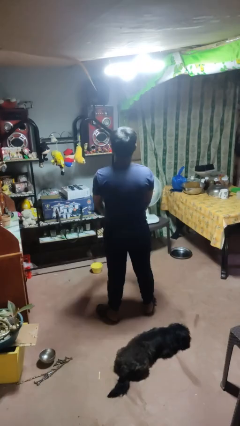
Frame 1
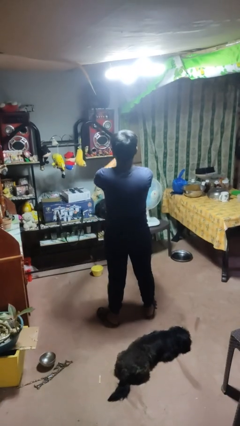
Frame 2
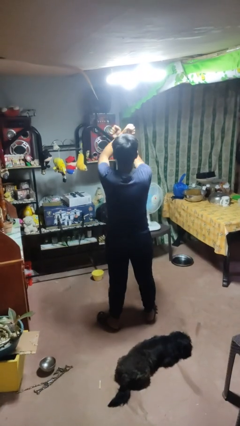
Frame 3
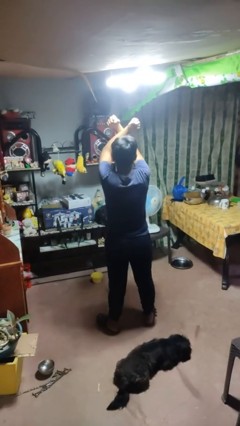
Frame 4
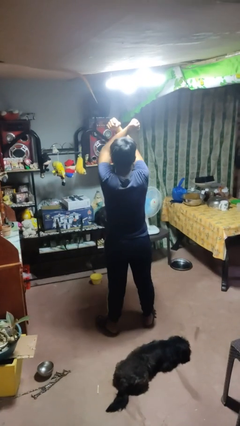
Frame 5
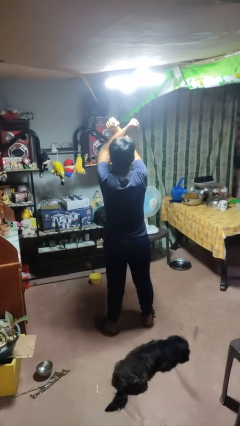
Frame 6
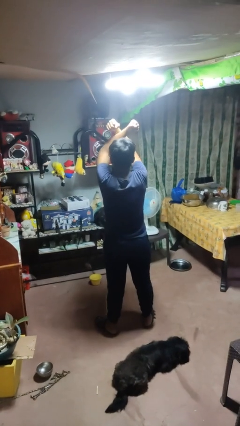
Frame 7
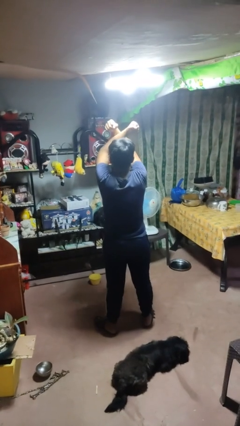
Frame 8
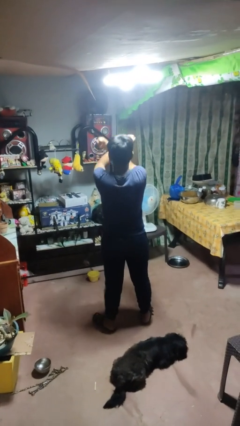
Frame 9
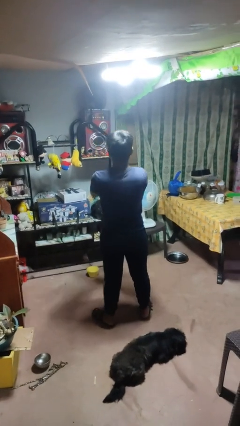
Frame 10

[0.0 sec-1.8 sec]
person gestures arms x

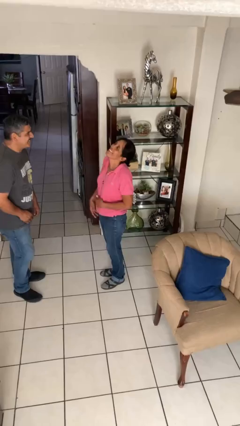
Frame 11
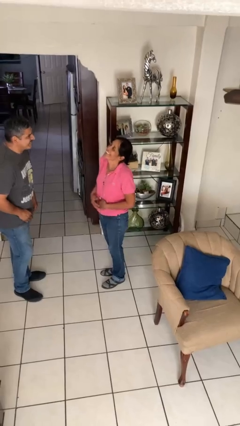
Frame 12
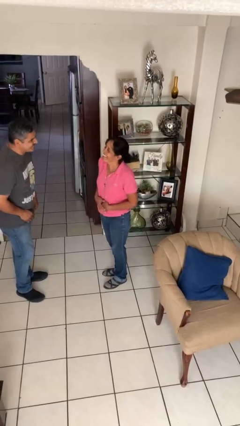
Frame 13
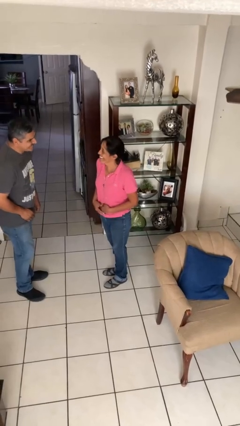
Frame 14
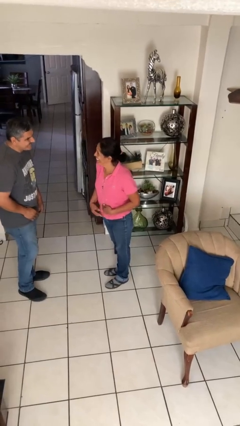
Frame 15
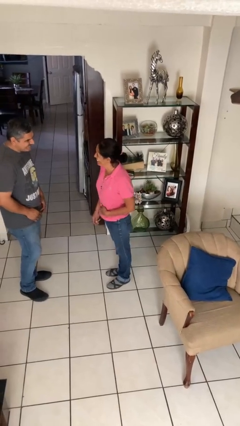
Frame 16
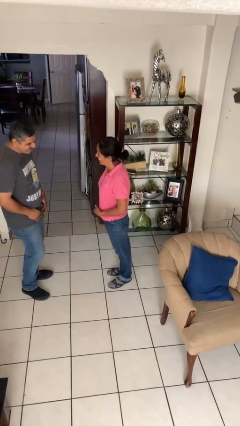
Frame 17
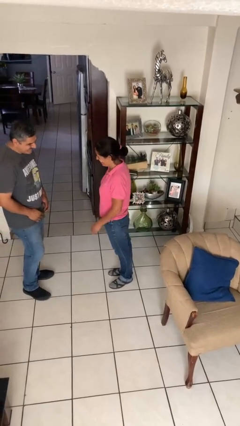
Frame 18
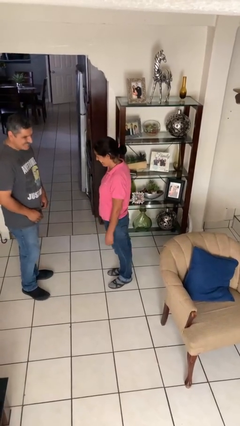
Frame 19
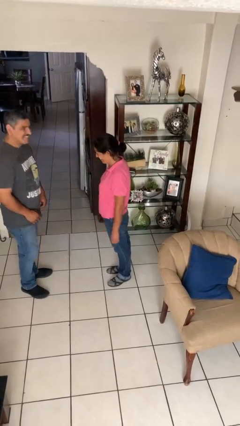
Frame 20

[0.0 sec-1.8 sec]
person laughs with person

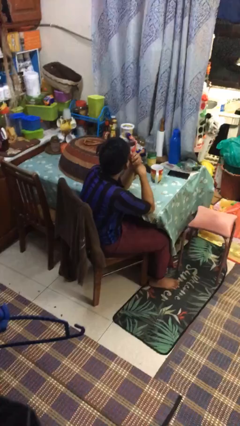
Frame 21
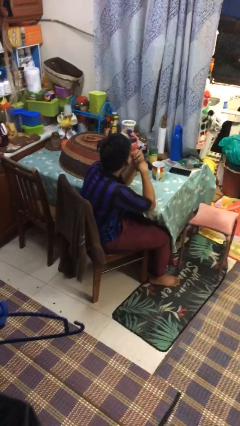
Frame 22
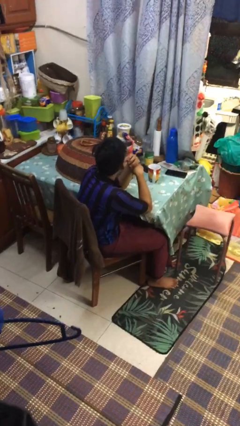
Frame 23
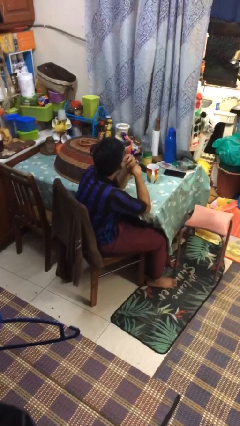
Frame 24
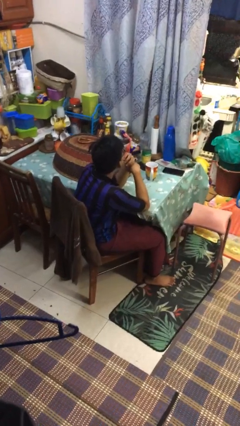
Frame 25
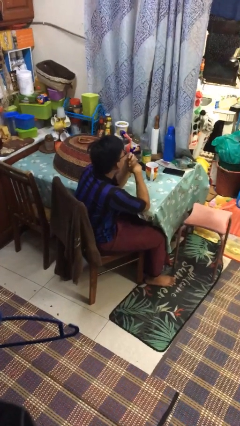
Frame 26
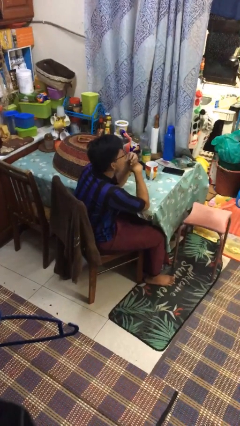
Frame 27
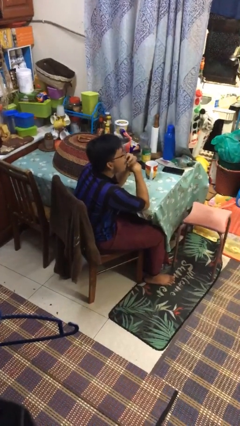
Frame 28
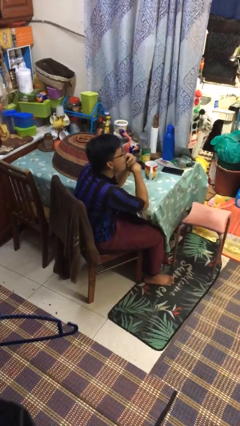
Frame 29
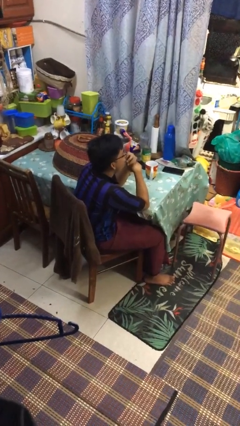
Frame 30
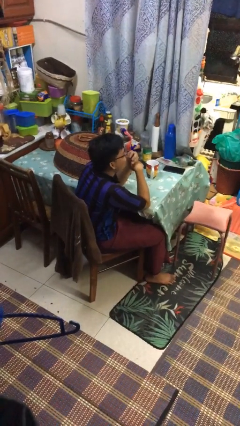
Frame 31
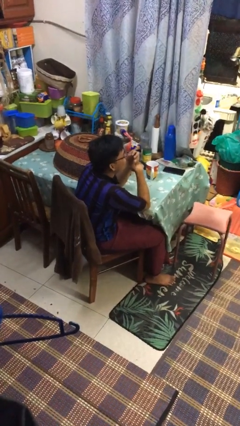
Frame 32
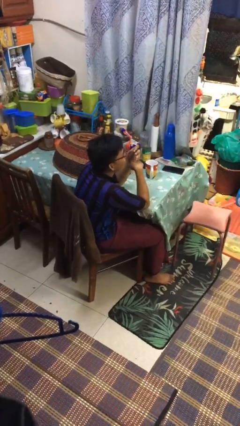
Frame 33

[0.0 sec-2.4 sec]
person licks fingers

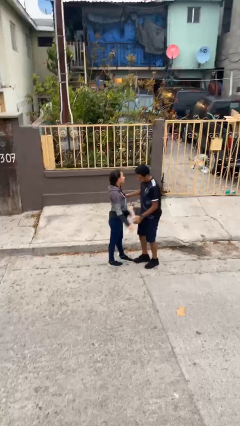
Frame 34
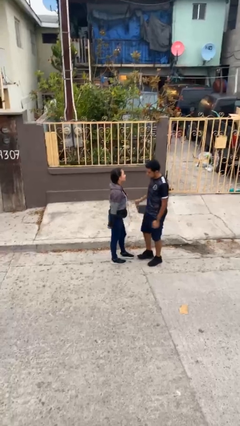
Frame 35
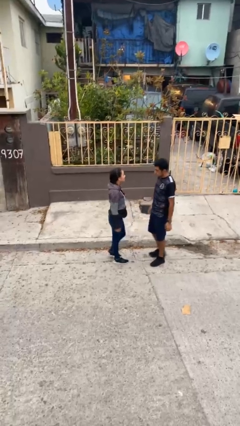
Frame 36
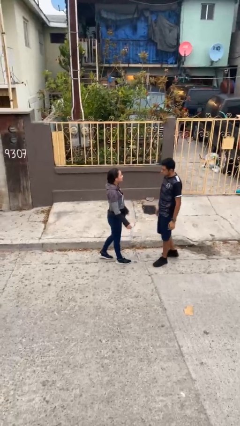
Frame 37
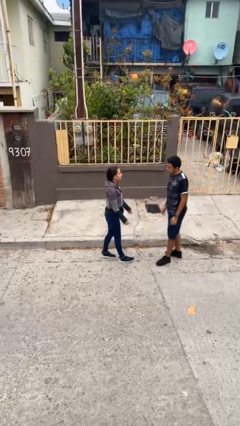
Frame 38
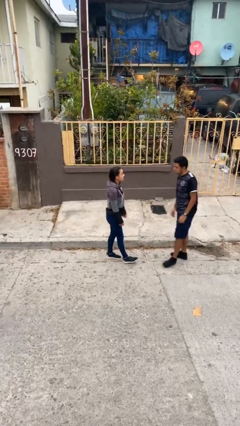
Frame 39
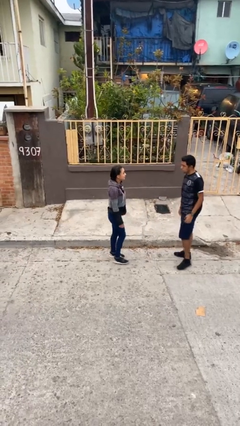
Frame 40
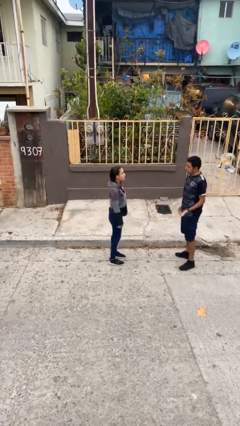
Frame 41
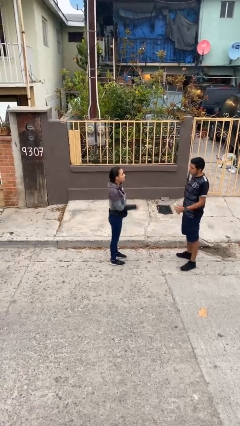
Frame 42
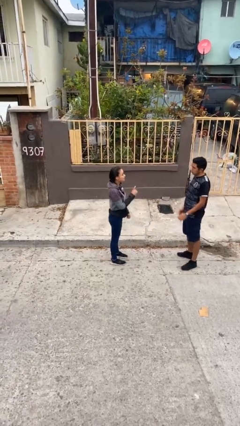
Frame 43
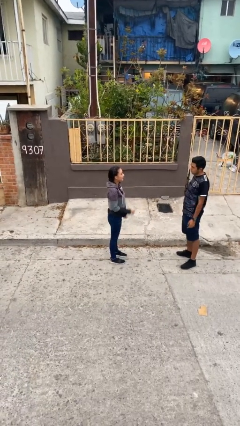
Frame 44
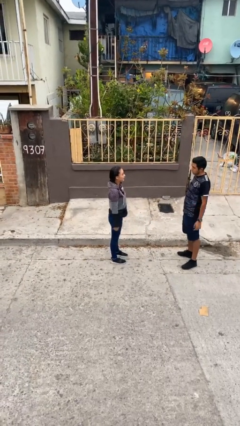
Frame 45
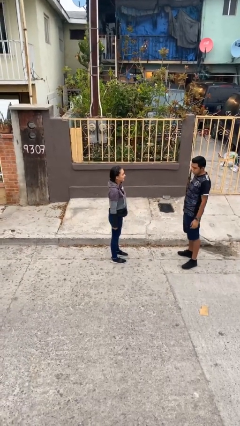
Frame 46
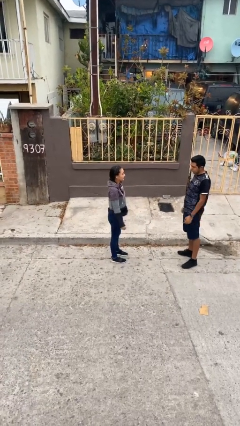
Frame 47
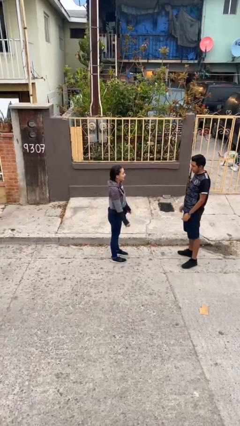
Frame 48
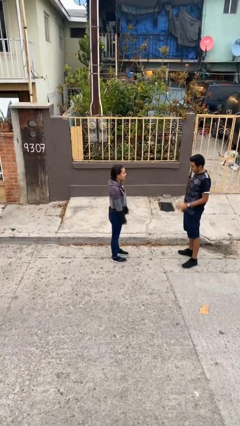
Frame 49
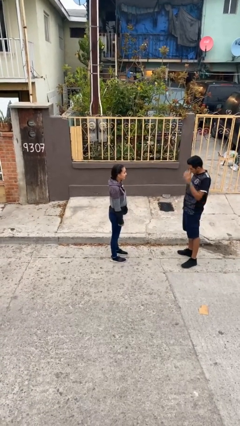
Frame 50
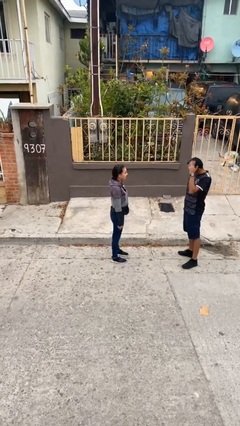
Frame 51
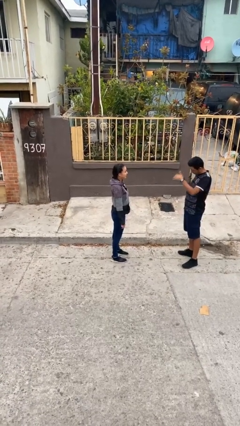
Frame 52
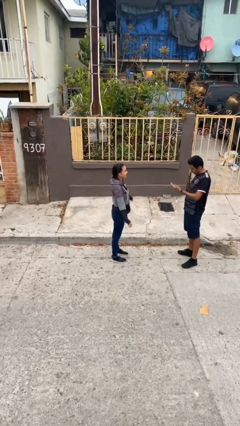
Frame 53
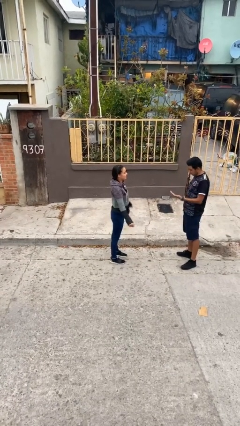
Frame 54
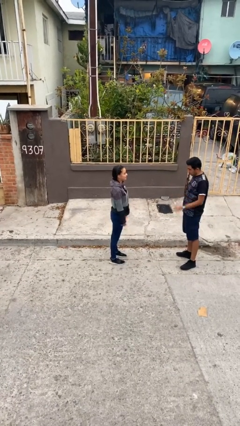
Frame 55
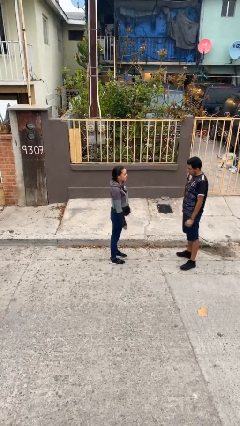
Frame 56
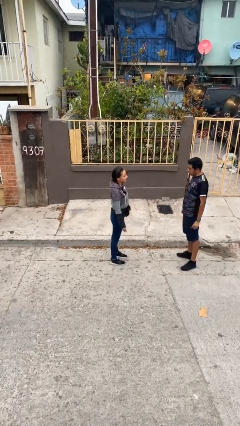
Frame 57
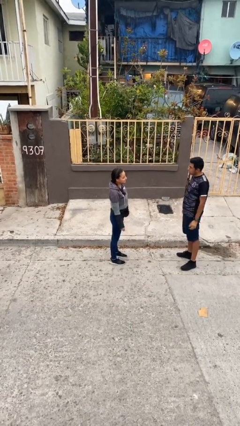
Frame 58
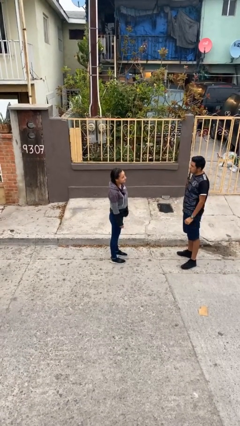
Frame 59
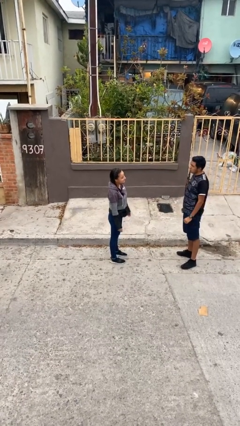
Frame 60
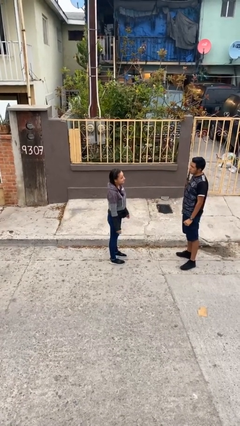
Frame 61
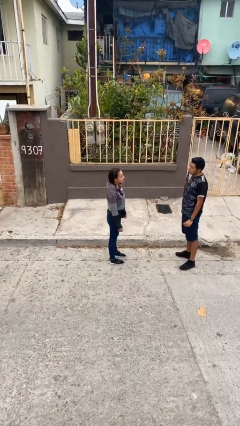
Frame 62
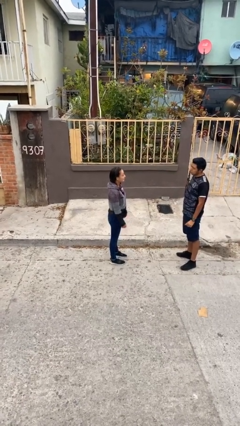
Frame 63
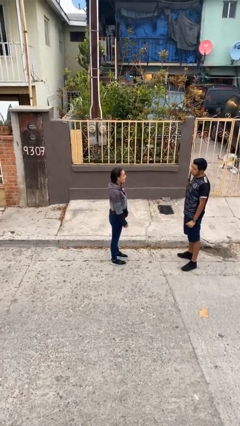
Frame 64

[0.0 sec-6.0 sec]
person talks to person

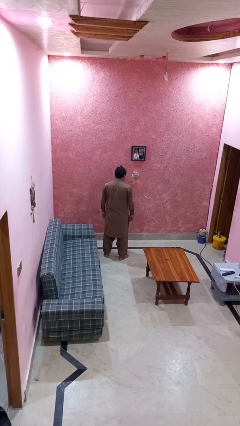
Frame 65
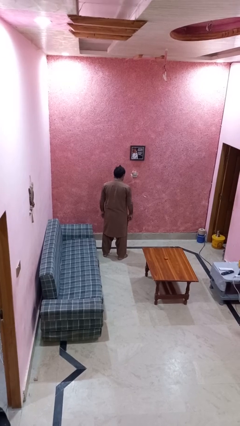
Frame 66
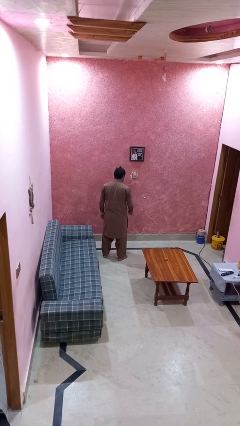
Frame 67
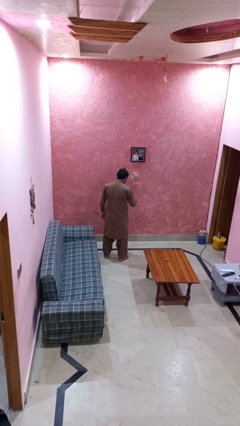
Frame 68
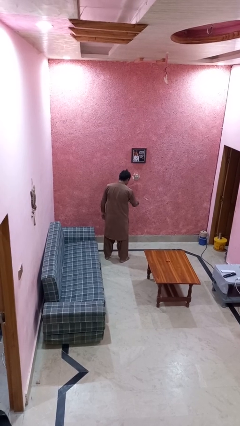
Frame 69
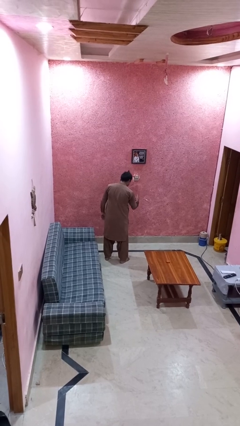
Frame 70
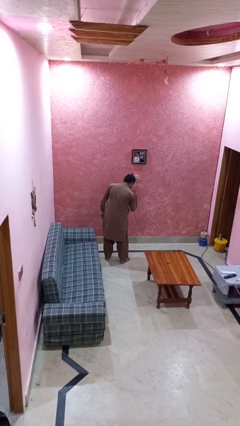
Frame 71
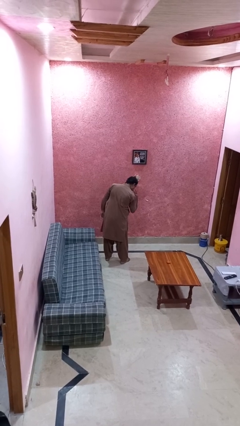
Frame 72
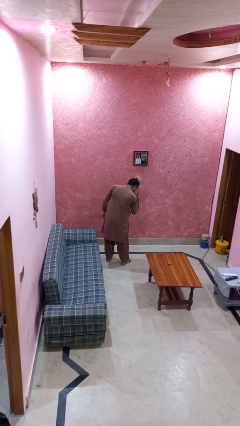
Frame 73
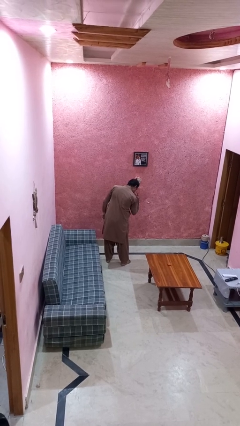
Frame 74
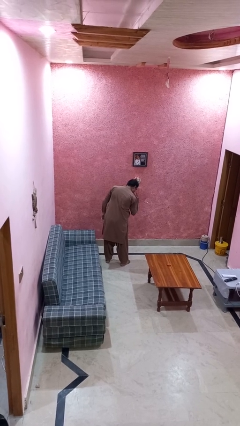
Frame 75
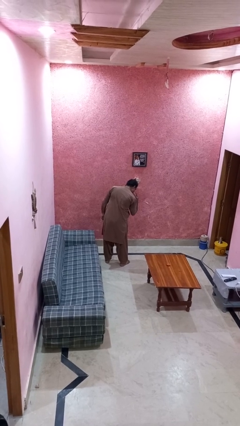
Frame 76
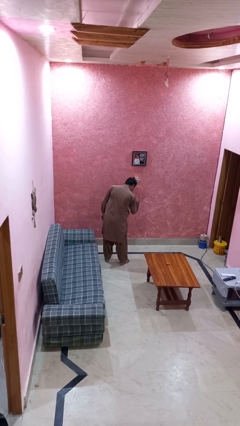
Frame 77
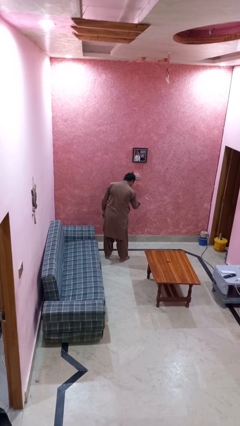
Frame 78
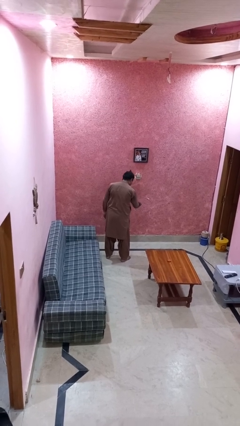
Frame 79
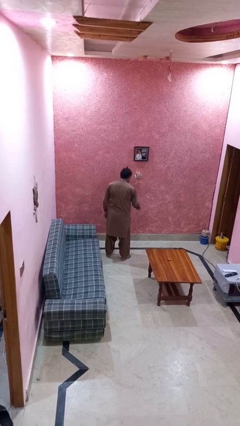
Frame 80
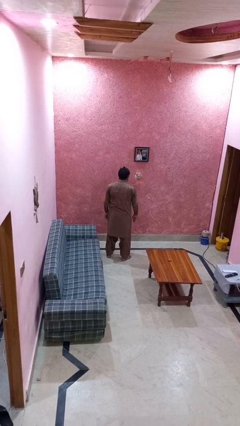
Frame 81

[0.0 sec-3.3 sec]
person gestures watch closely

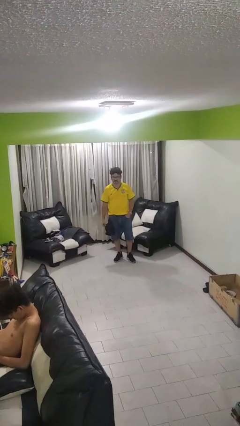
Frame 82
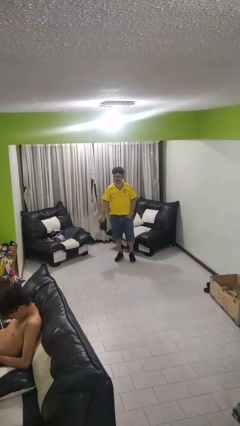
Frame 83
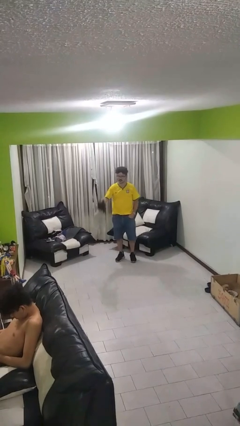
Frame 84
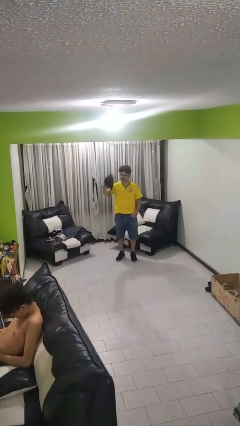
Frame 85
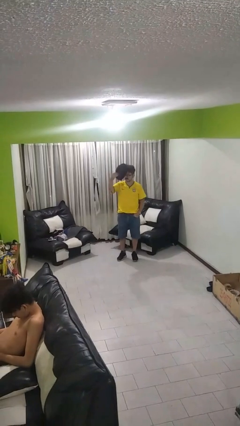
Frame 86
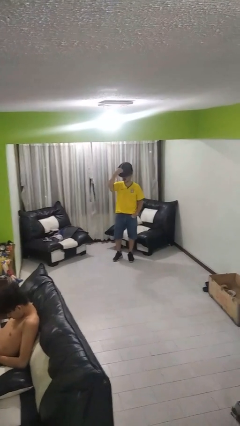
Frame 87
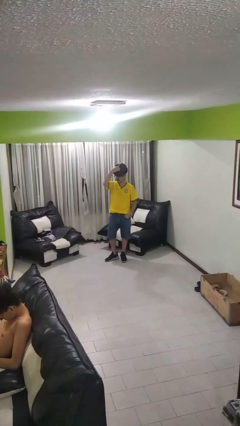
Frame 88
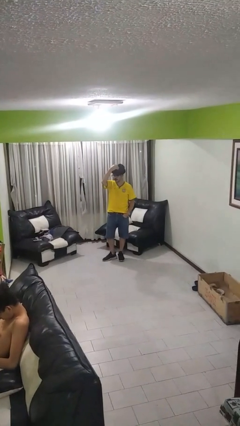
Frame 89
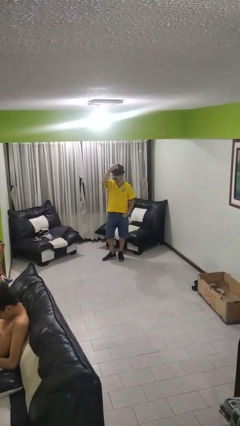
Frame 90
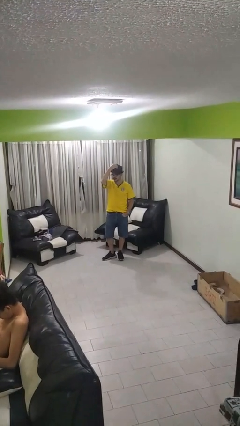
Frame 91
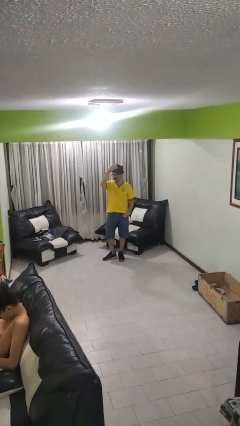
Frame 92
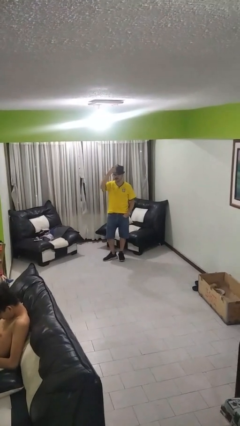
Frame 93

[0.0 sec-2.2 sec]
person puts on hat
